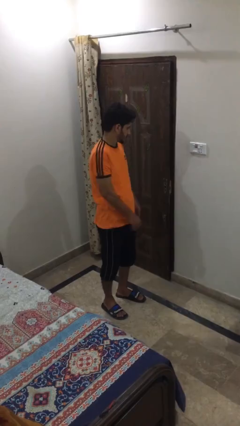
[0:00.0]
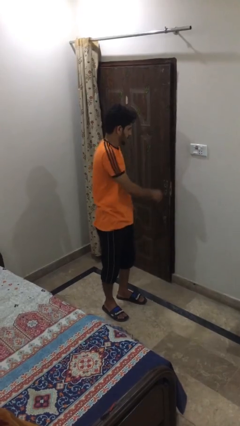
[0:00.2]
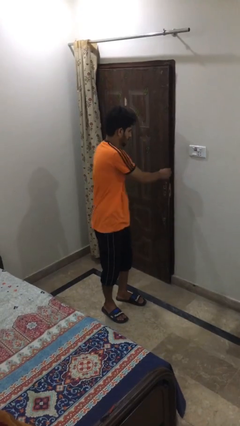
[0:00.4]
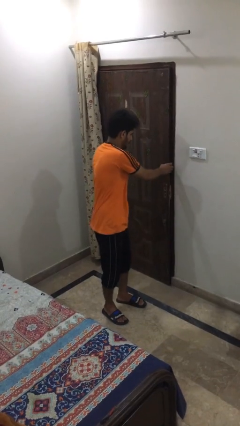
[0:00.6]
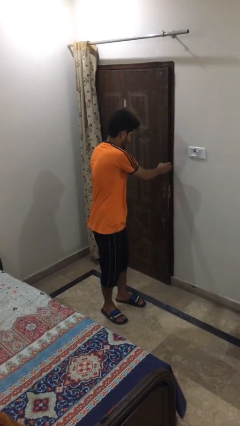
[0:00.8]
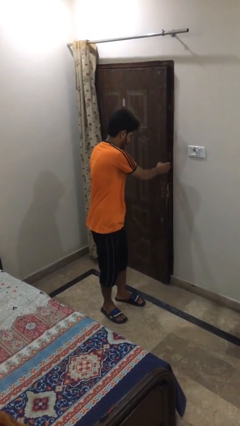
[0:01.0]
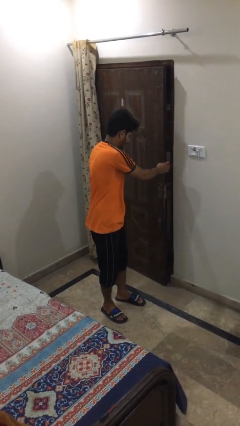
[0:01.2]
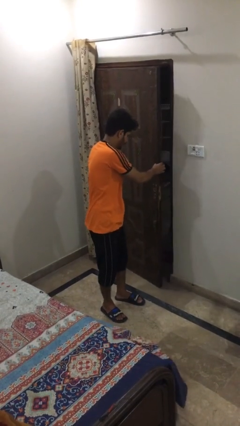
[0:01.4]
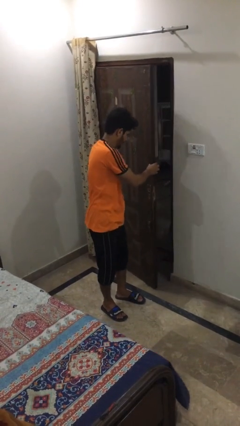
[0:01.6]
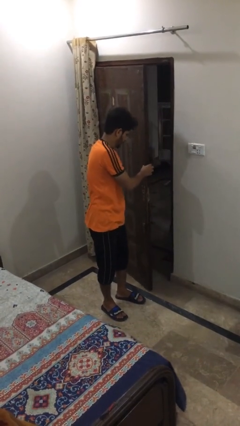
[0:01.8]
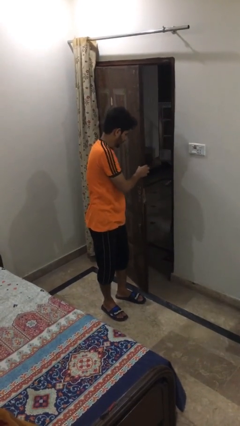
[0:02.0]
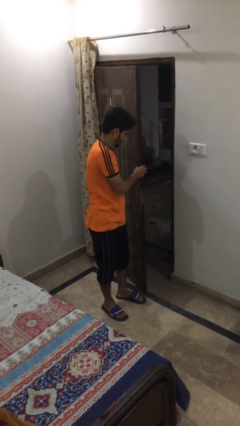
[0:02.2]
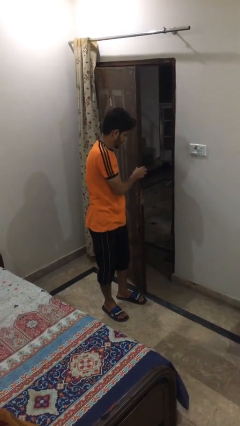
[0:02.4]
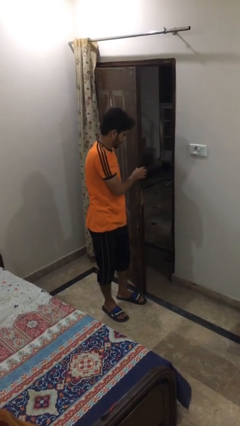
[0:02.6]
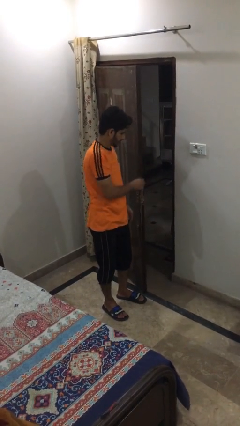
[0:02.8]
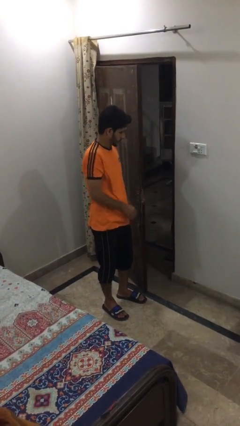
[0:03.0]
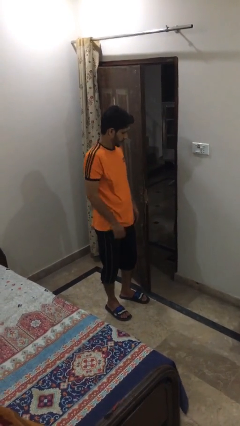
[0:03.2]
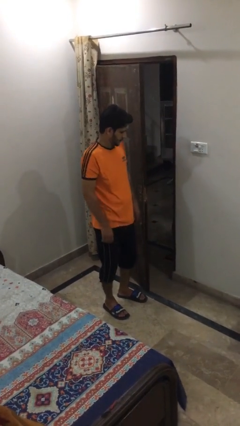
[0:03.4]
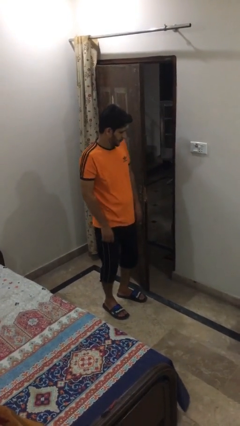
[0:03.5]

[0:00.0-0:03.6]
person opens facility door

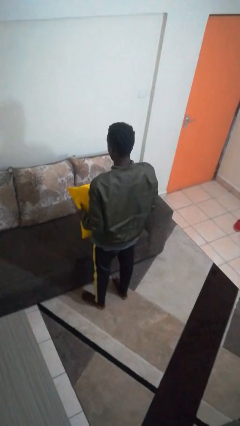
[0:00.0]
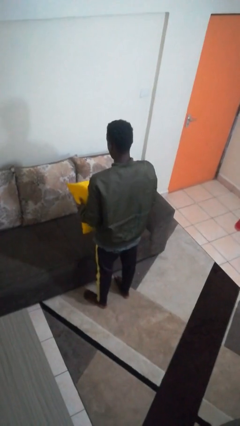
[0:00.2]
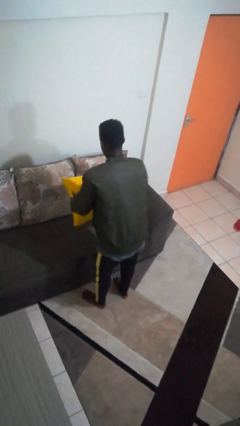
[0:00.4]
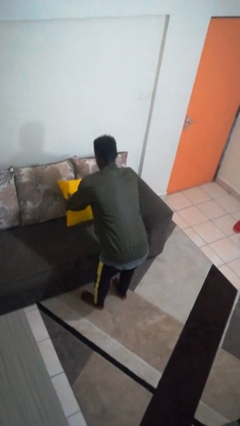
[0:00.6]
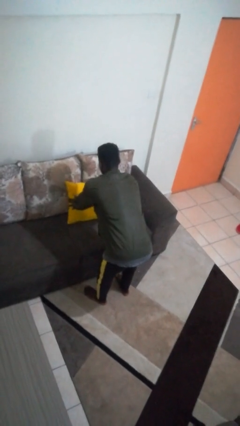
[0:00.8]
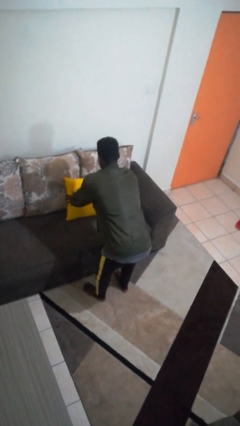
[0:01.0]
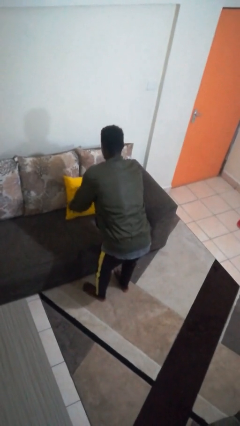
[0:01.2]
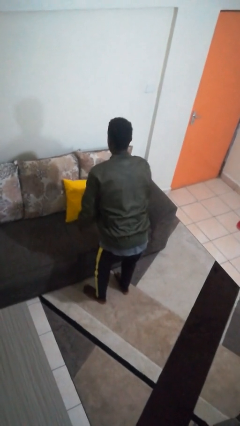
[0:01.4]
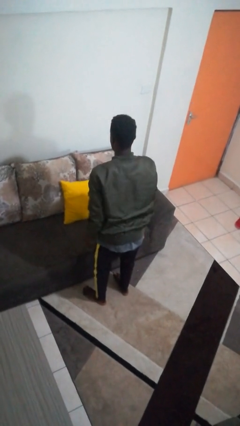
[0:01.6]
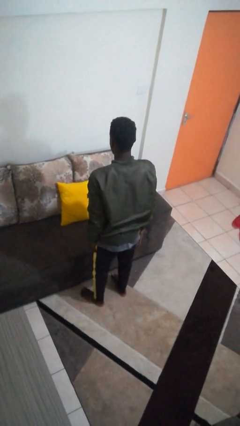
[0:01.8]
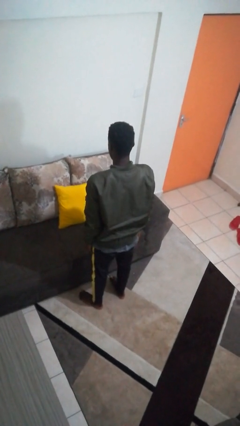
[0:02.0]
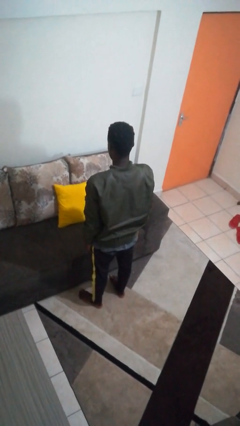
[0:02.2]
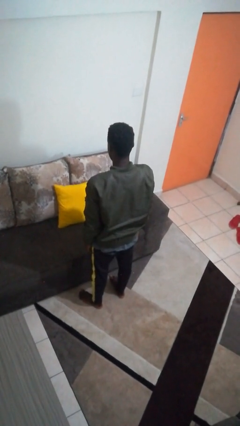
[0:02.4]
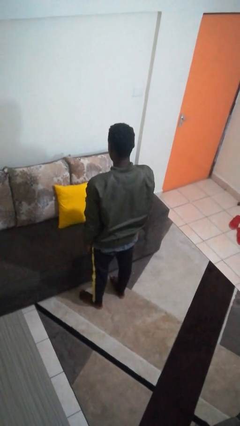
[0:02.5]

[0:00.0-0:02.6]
person puts down object on couch

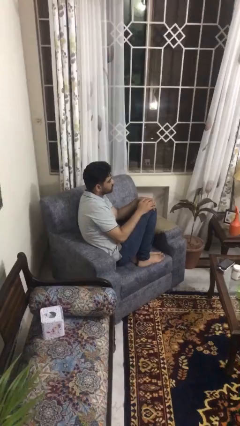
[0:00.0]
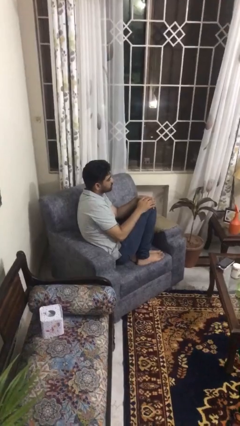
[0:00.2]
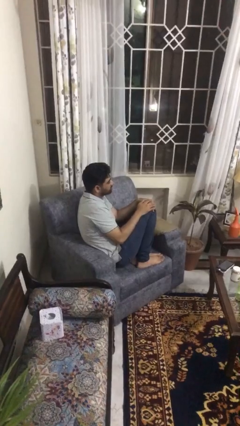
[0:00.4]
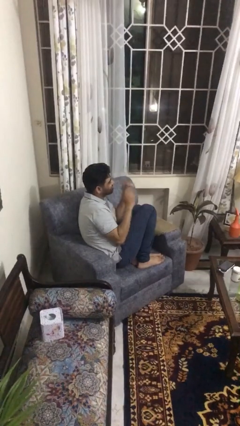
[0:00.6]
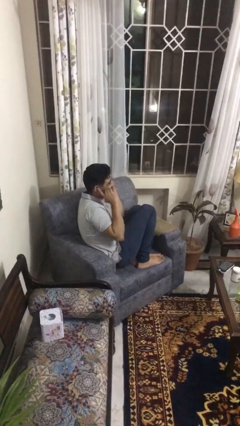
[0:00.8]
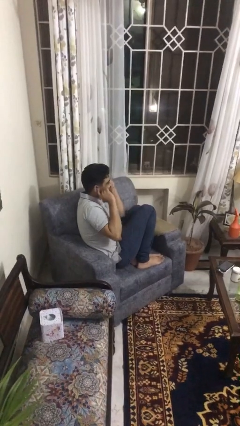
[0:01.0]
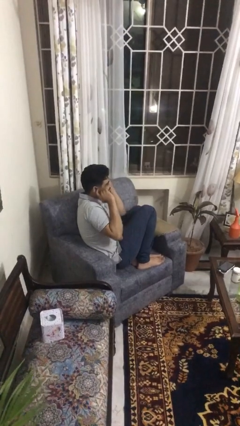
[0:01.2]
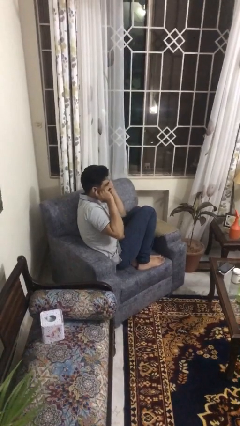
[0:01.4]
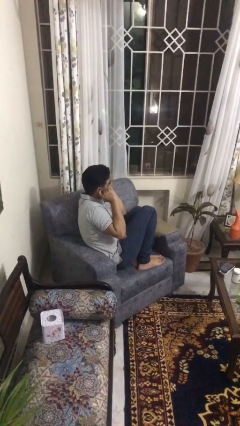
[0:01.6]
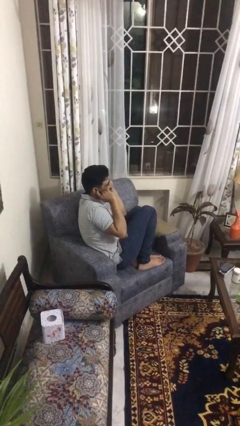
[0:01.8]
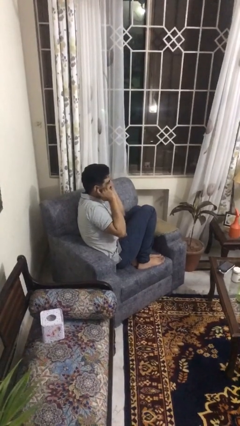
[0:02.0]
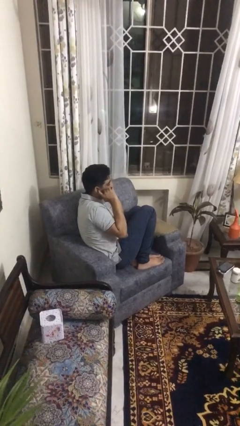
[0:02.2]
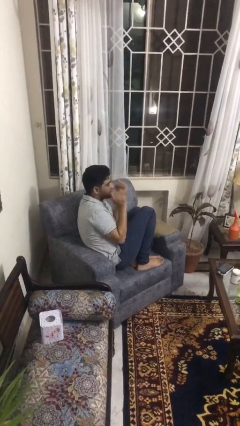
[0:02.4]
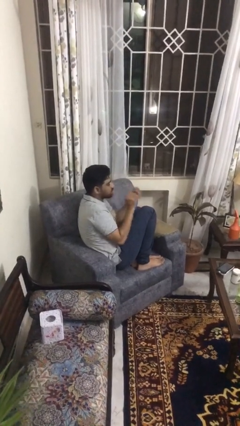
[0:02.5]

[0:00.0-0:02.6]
person puts fingers in ear

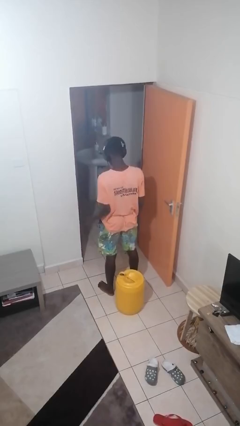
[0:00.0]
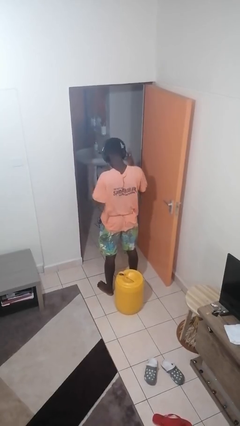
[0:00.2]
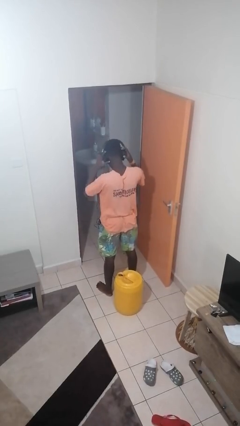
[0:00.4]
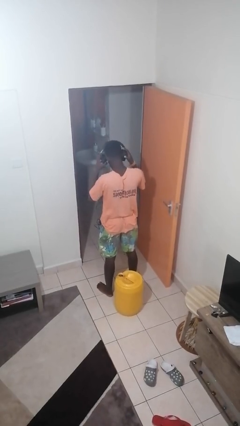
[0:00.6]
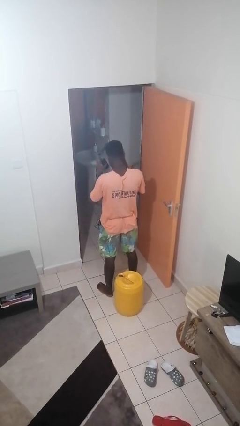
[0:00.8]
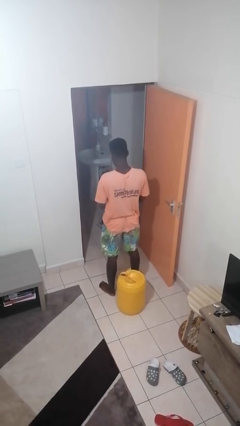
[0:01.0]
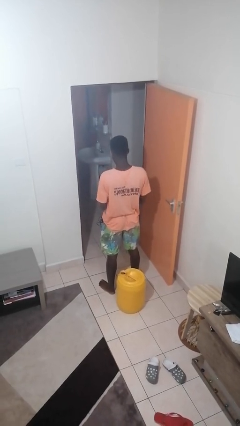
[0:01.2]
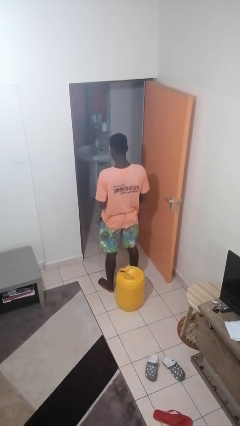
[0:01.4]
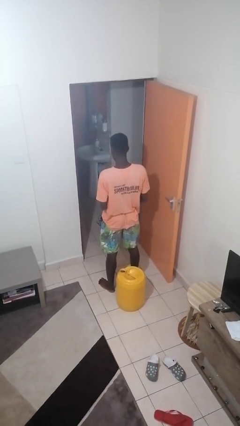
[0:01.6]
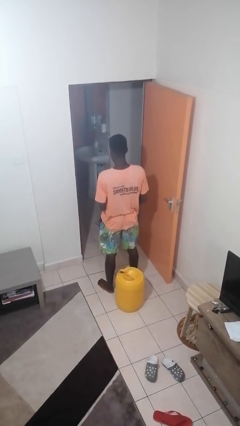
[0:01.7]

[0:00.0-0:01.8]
person takes off headphones

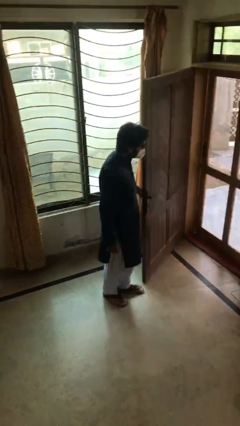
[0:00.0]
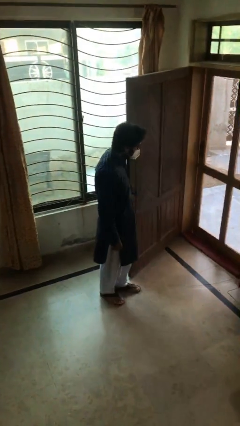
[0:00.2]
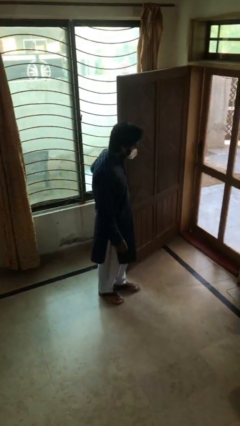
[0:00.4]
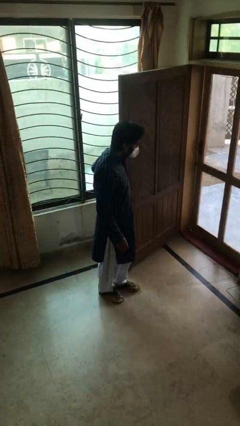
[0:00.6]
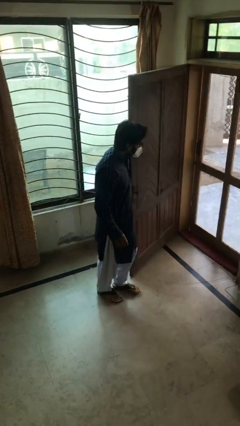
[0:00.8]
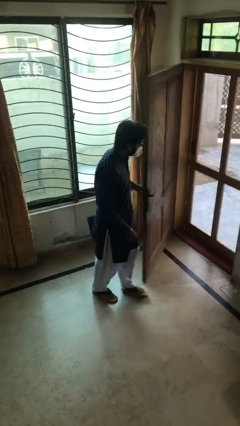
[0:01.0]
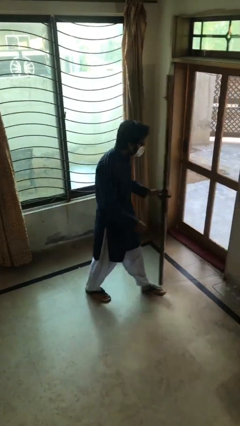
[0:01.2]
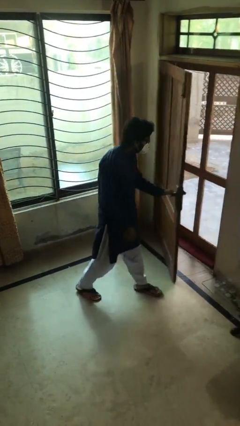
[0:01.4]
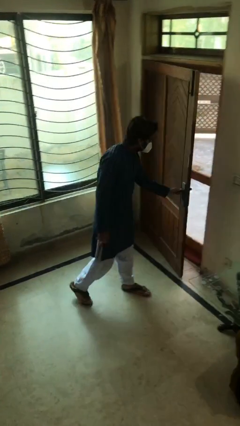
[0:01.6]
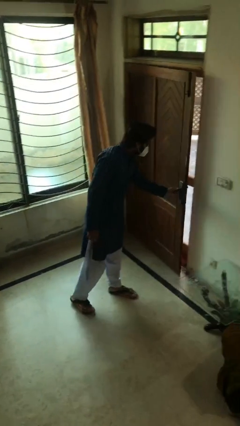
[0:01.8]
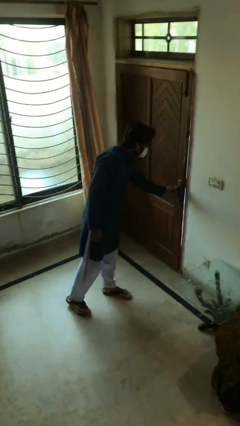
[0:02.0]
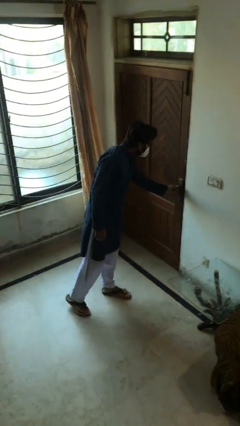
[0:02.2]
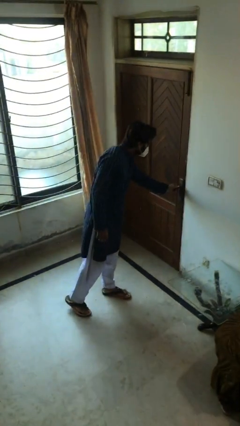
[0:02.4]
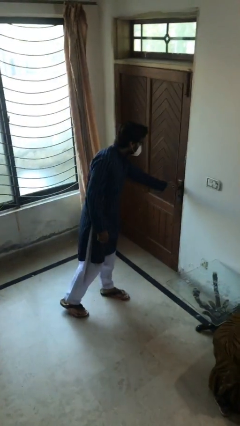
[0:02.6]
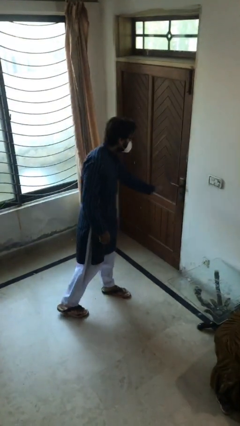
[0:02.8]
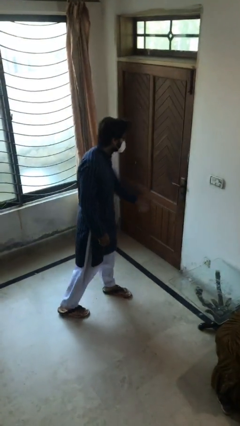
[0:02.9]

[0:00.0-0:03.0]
person closes facility door

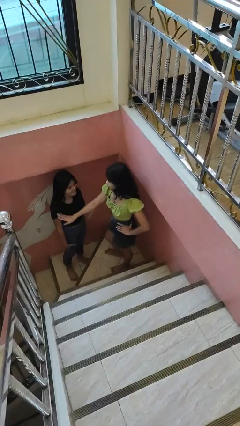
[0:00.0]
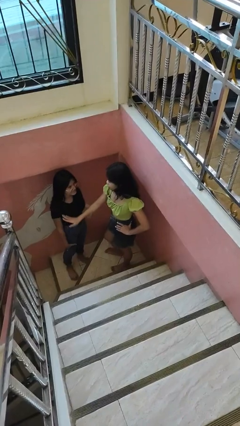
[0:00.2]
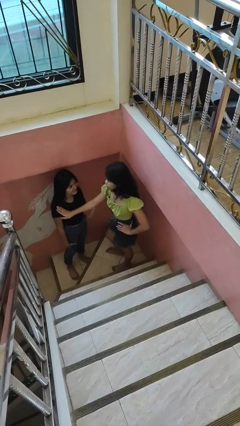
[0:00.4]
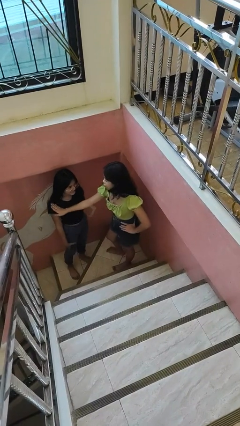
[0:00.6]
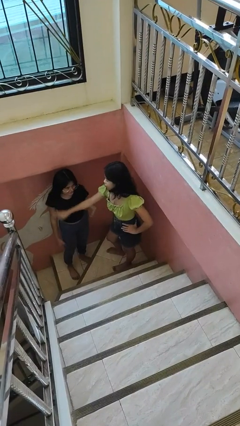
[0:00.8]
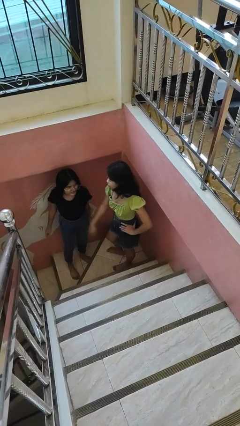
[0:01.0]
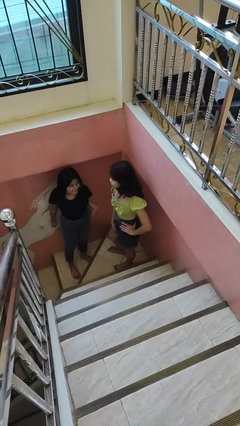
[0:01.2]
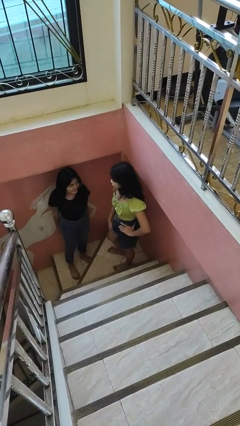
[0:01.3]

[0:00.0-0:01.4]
person shoves person

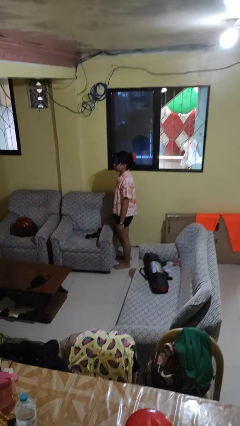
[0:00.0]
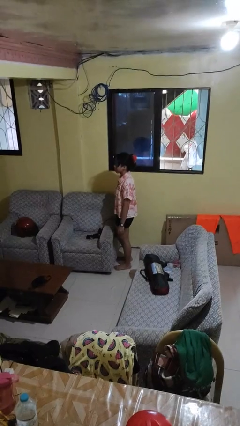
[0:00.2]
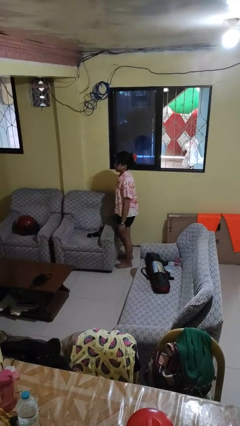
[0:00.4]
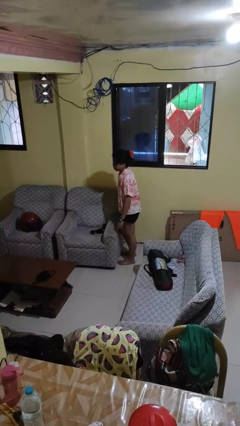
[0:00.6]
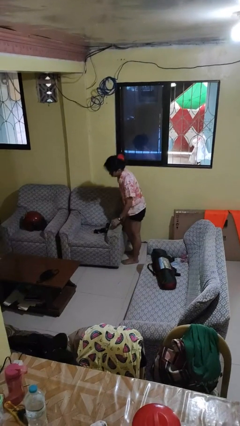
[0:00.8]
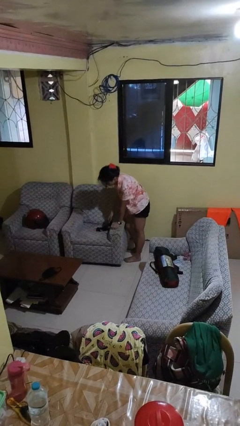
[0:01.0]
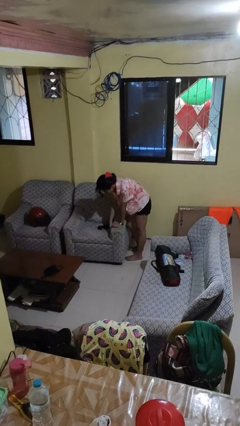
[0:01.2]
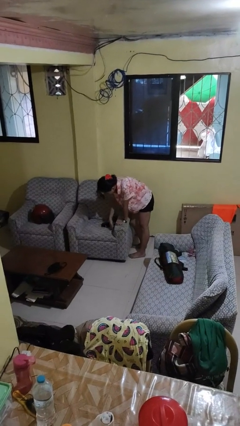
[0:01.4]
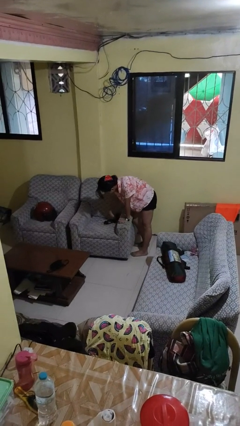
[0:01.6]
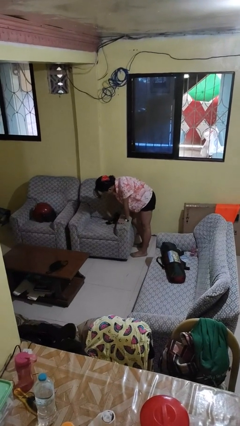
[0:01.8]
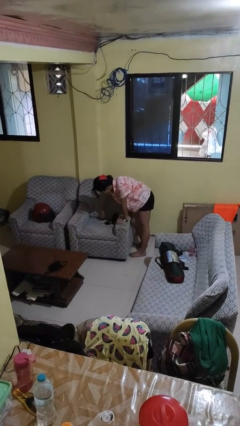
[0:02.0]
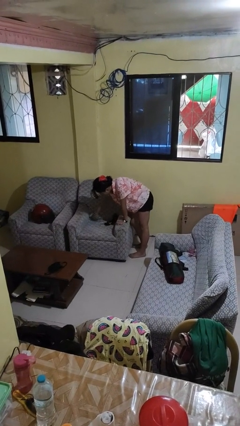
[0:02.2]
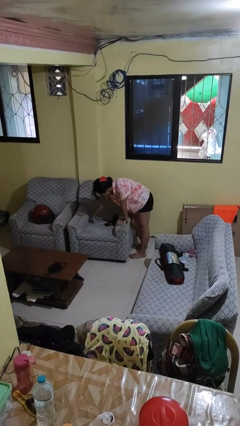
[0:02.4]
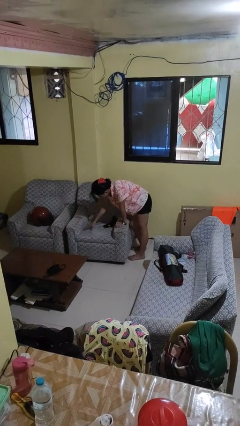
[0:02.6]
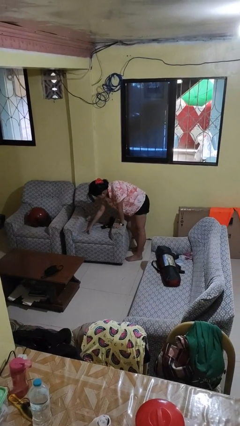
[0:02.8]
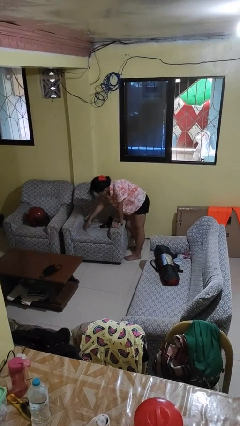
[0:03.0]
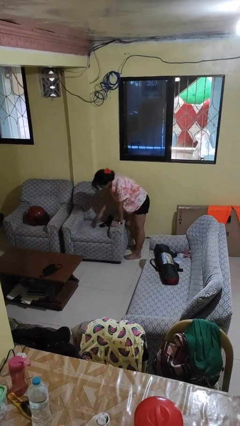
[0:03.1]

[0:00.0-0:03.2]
person searches under couch
